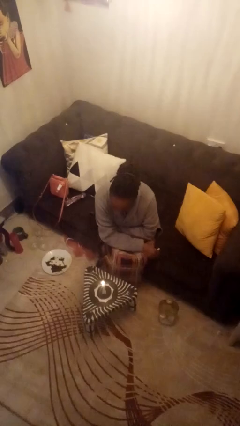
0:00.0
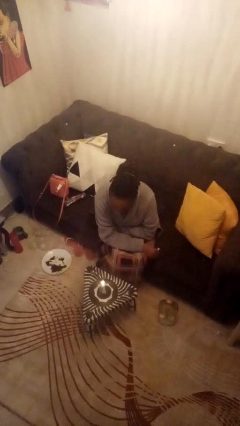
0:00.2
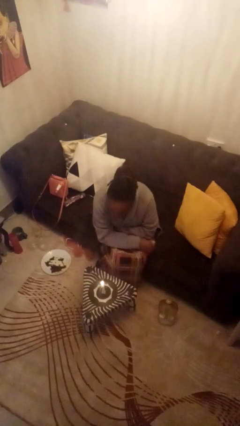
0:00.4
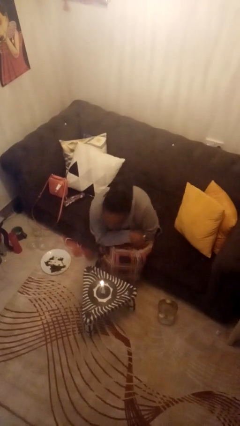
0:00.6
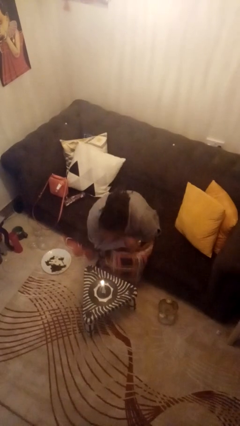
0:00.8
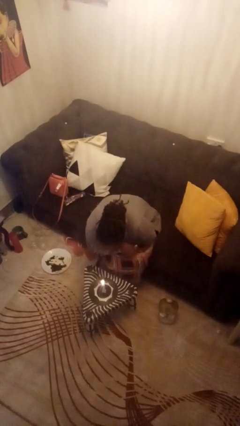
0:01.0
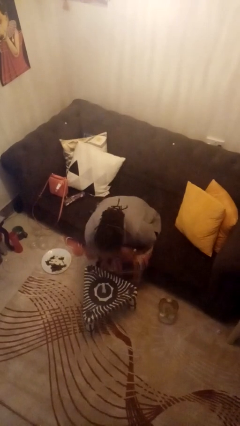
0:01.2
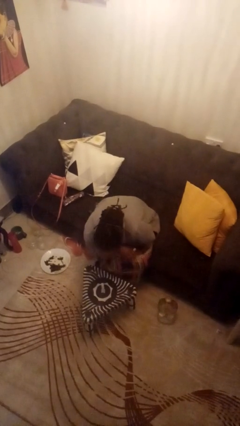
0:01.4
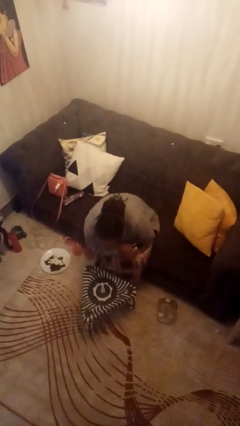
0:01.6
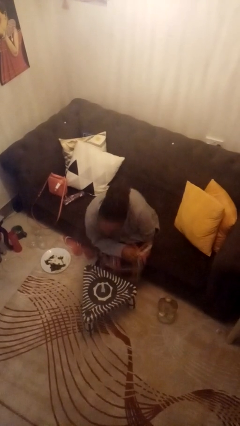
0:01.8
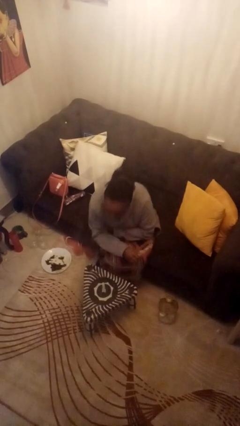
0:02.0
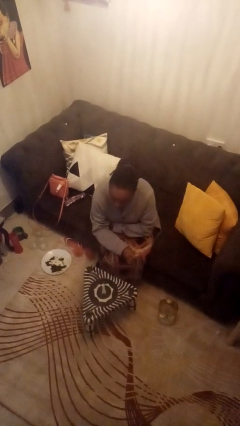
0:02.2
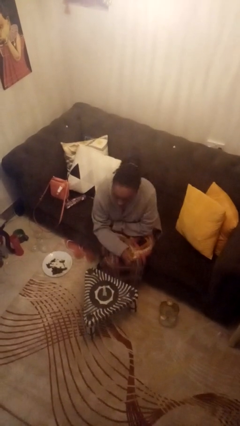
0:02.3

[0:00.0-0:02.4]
person extinguishes candle

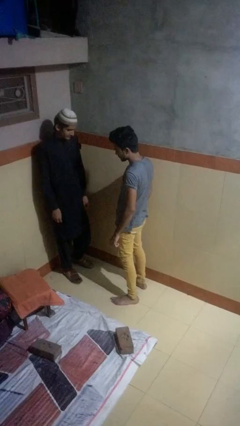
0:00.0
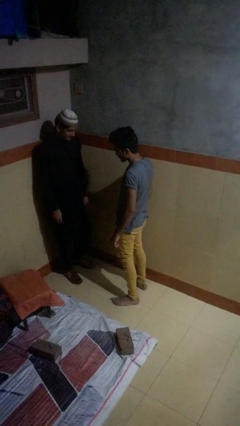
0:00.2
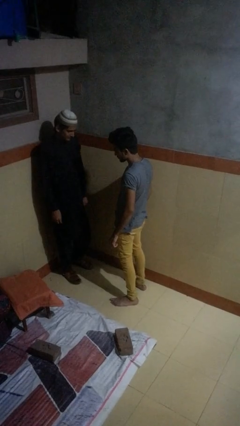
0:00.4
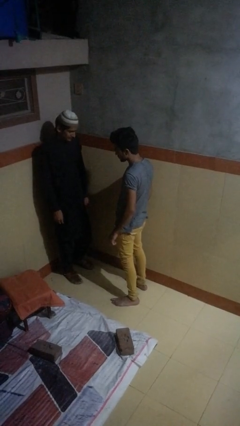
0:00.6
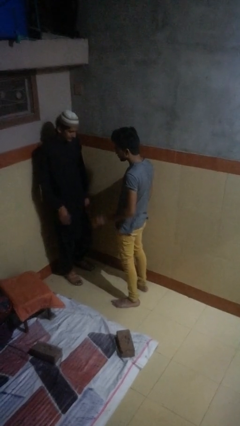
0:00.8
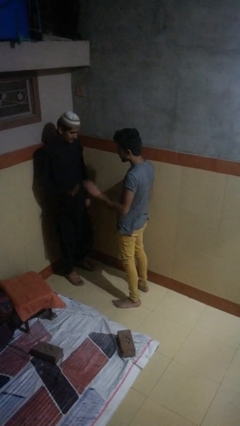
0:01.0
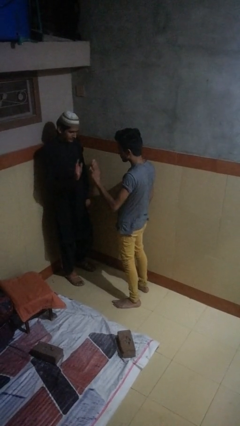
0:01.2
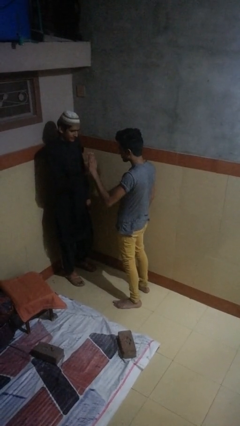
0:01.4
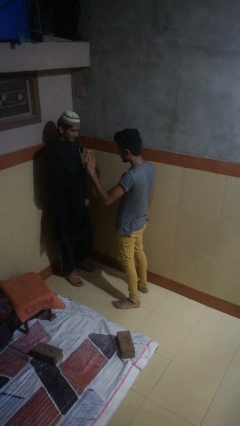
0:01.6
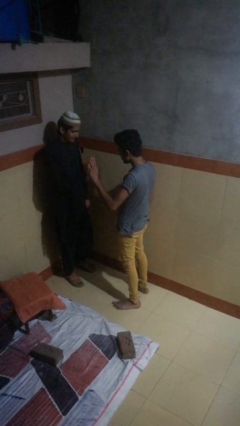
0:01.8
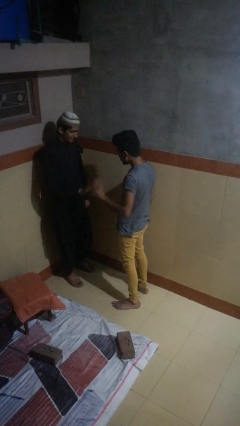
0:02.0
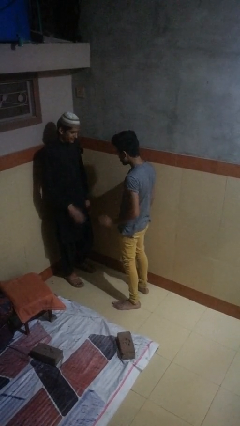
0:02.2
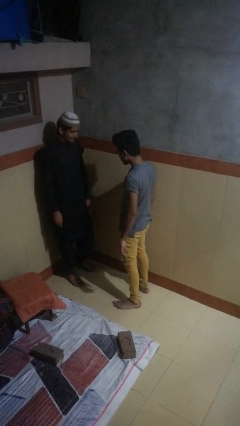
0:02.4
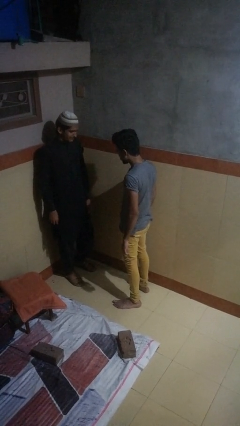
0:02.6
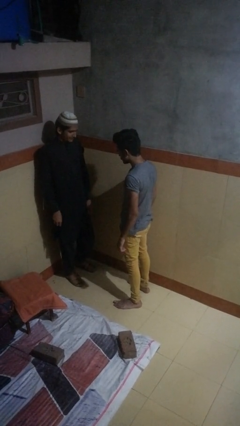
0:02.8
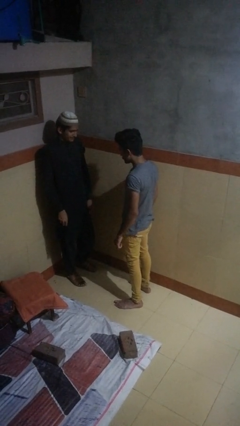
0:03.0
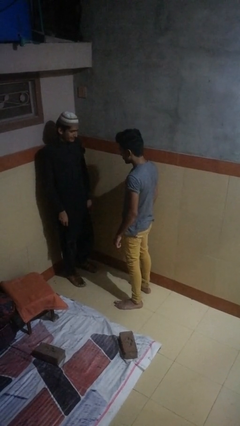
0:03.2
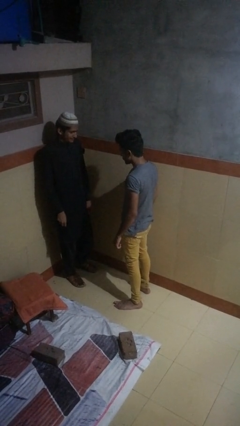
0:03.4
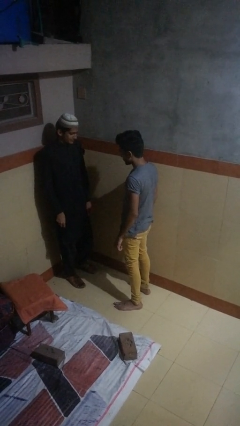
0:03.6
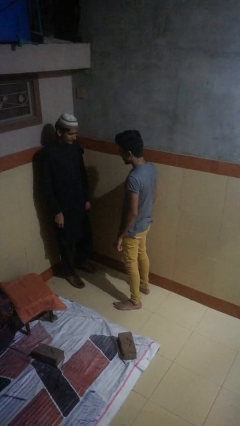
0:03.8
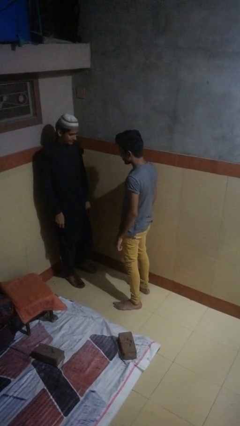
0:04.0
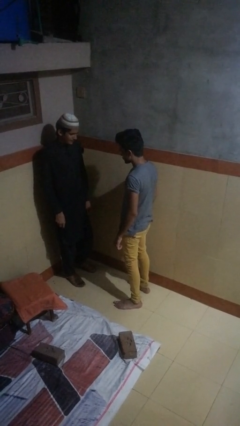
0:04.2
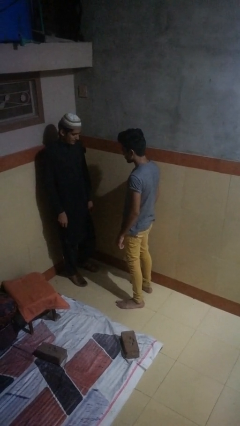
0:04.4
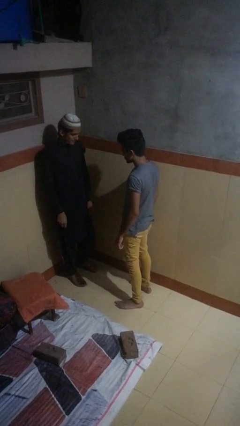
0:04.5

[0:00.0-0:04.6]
person highfives hand

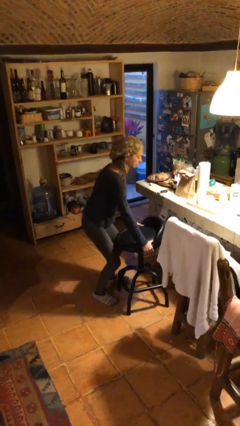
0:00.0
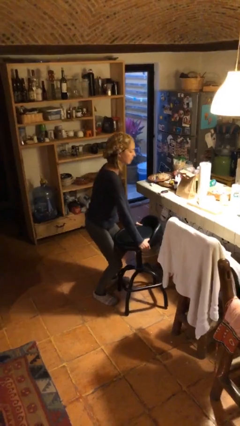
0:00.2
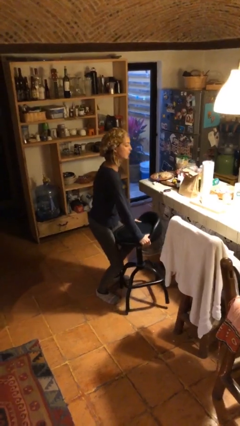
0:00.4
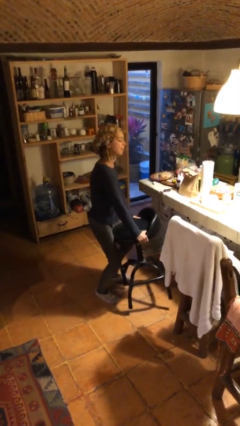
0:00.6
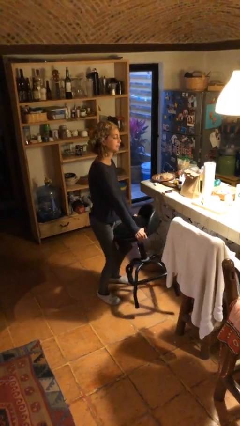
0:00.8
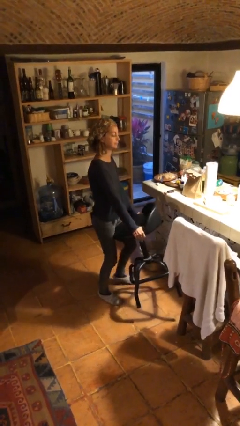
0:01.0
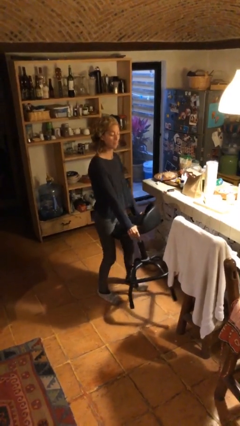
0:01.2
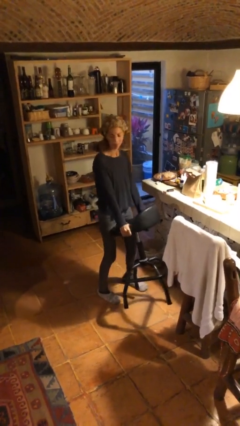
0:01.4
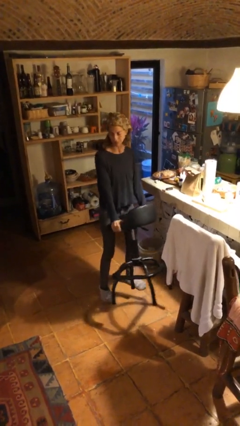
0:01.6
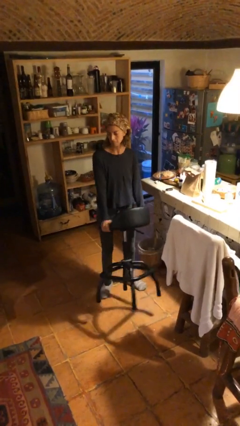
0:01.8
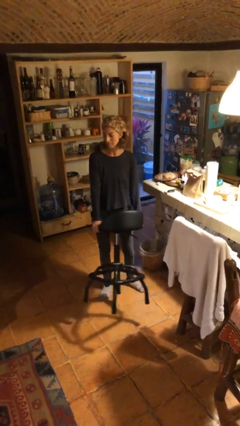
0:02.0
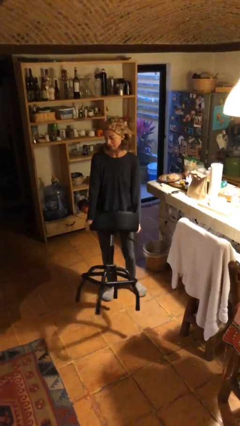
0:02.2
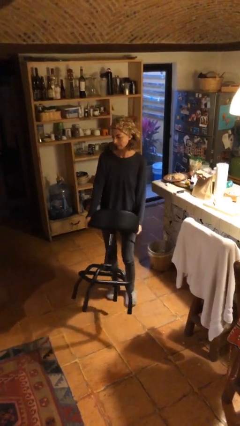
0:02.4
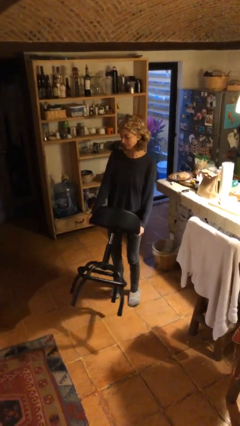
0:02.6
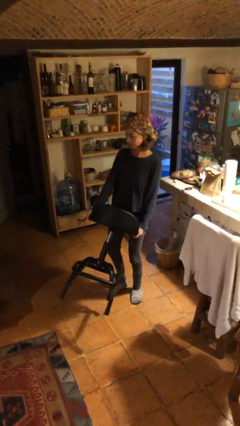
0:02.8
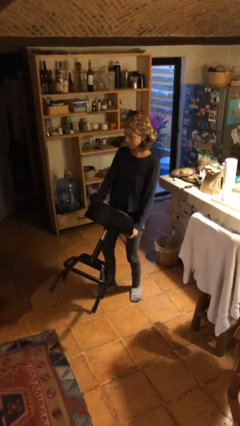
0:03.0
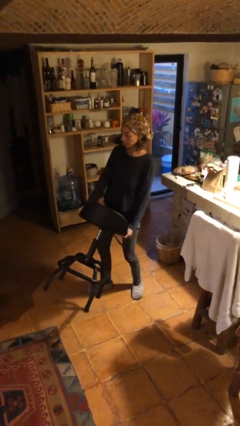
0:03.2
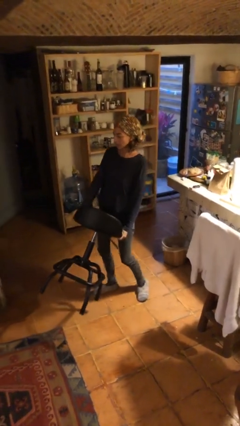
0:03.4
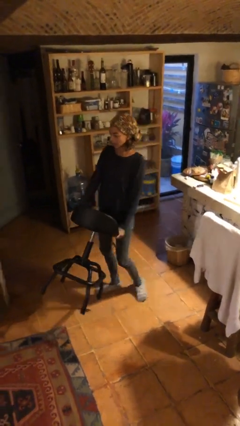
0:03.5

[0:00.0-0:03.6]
person carries heavy object

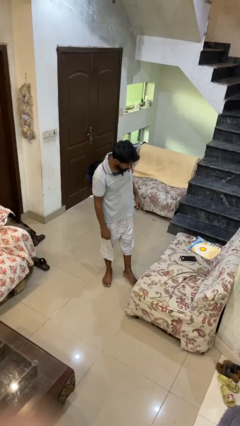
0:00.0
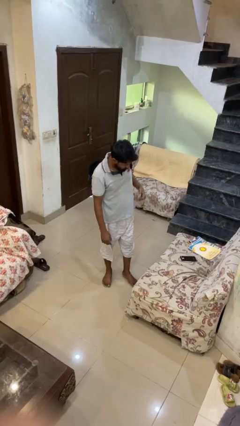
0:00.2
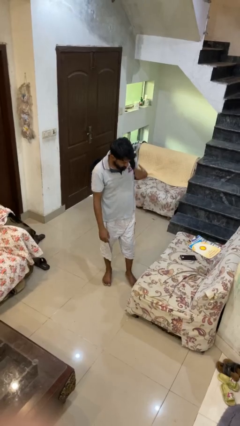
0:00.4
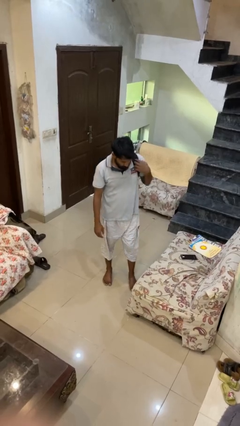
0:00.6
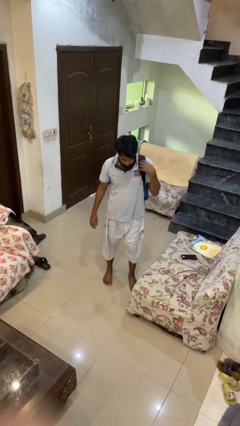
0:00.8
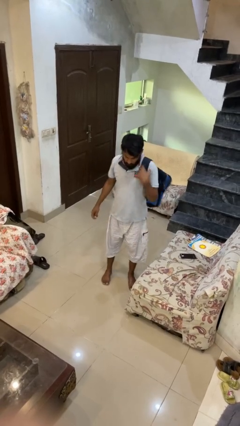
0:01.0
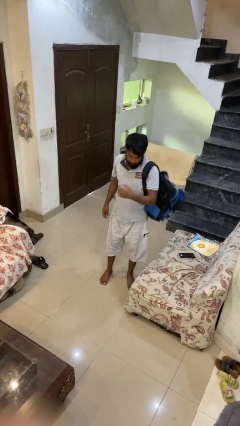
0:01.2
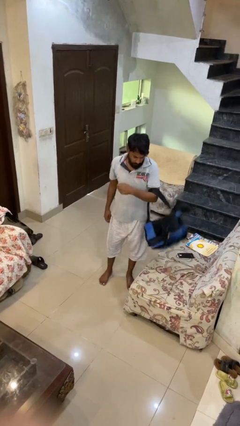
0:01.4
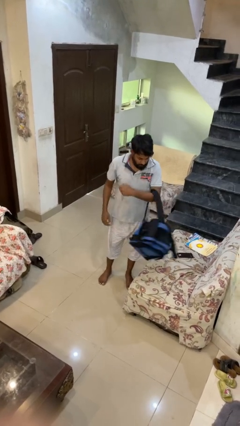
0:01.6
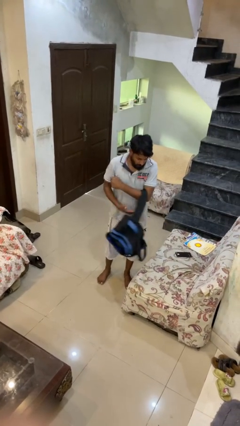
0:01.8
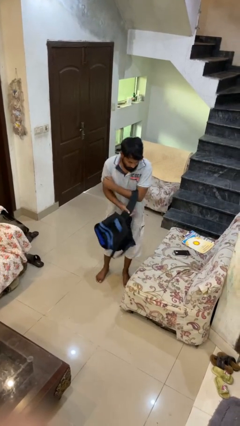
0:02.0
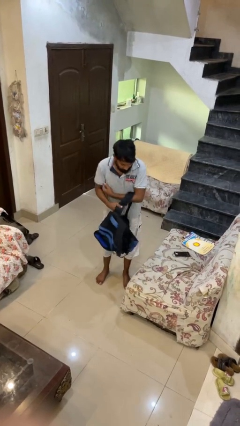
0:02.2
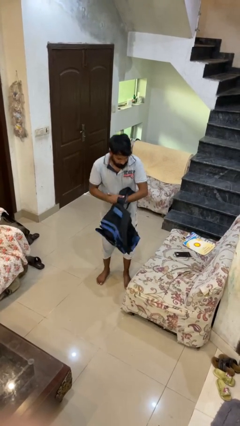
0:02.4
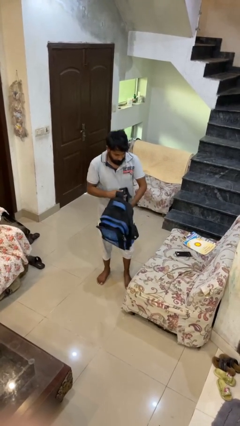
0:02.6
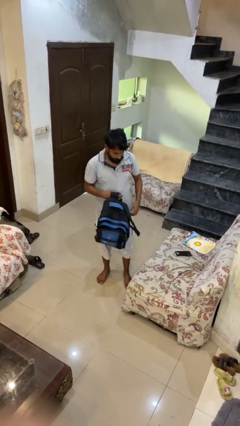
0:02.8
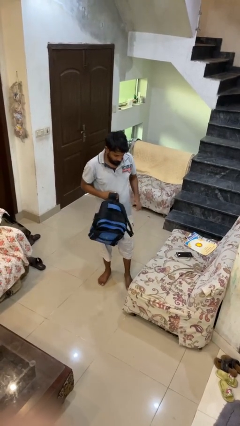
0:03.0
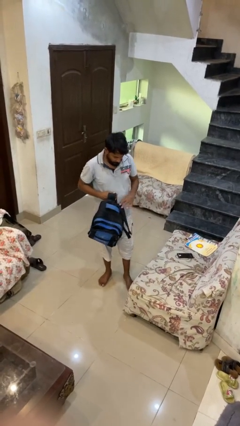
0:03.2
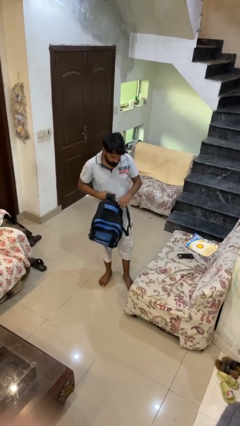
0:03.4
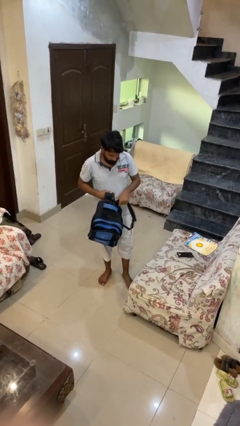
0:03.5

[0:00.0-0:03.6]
person takes off backpack

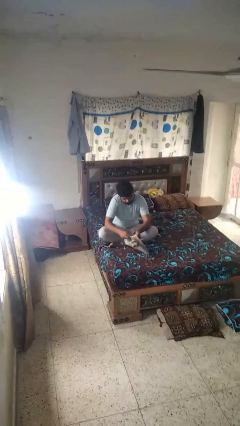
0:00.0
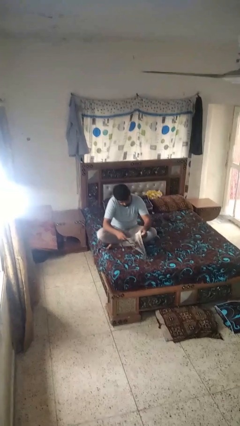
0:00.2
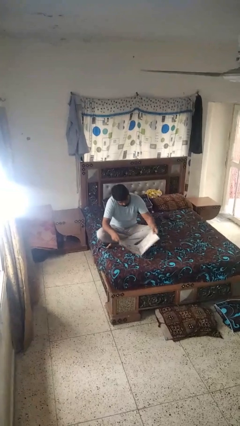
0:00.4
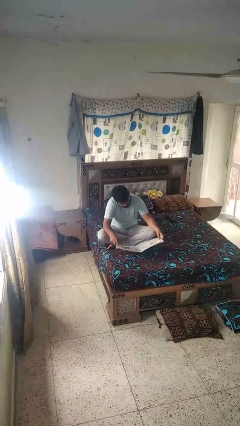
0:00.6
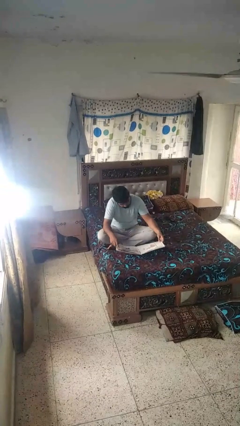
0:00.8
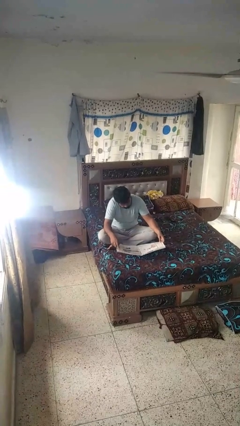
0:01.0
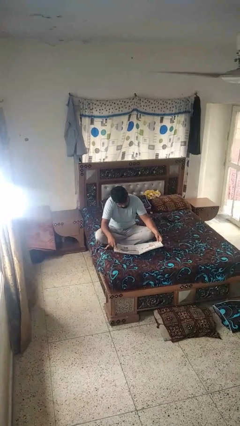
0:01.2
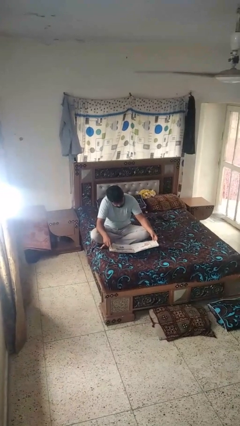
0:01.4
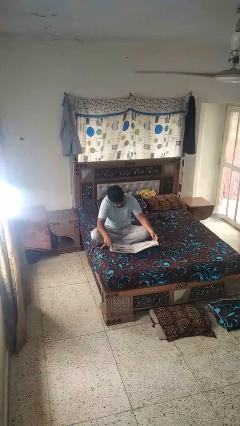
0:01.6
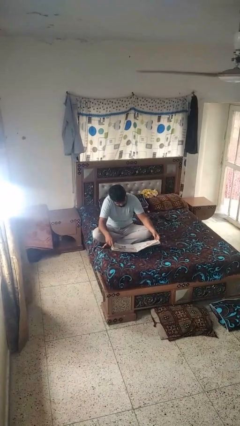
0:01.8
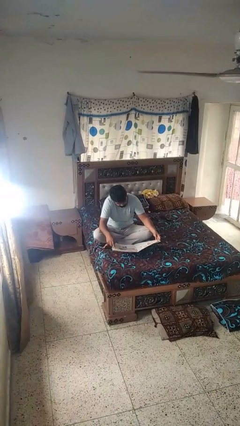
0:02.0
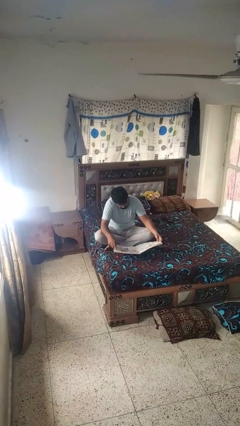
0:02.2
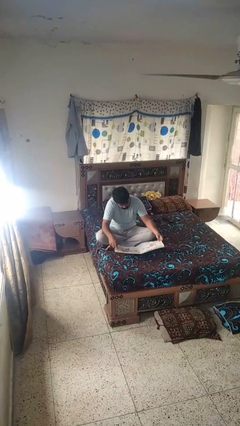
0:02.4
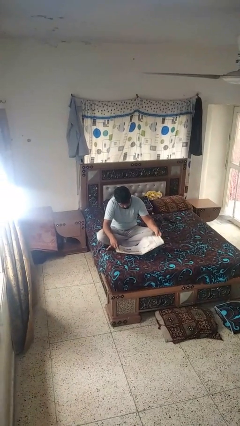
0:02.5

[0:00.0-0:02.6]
person reads magazine

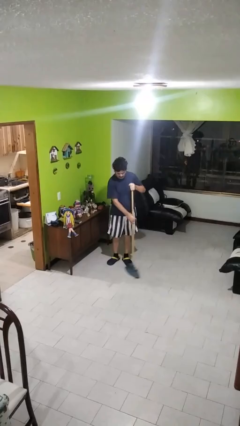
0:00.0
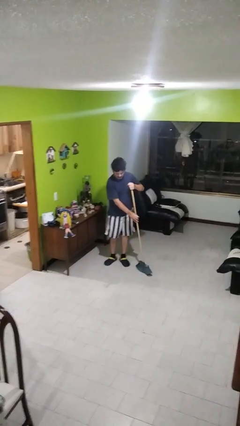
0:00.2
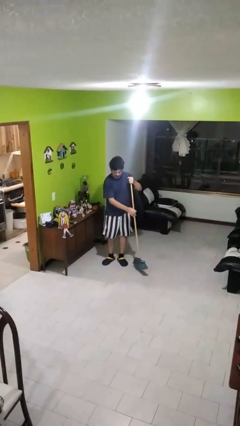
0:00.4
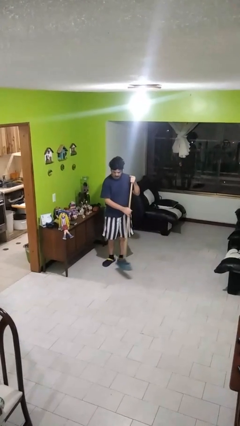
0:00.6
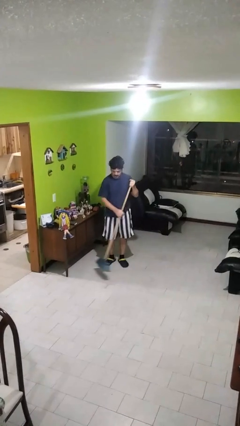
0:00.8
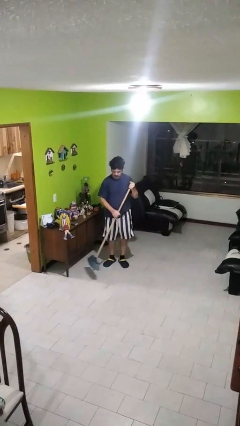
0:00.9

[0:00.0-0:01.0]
person sweeps floor
